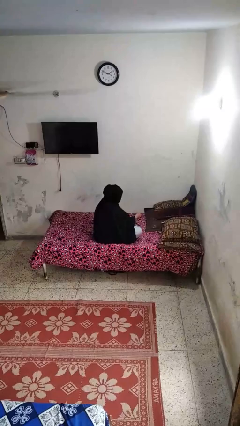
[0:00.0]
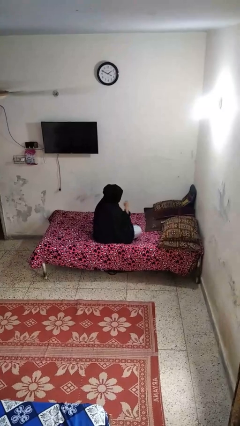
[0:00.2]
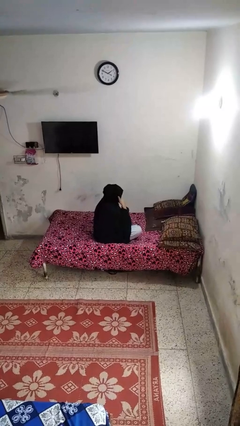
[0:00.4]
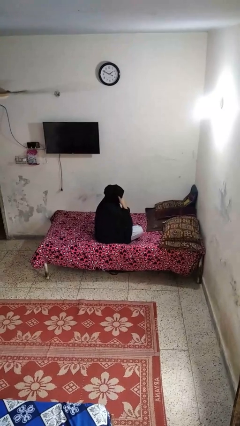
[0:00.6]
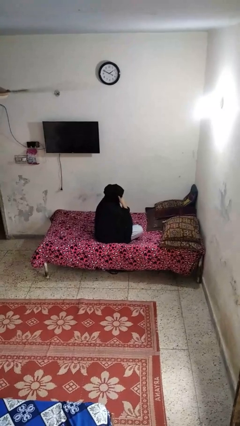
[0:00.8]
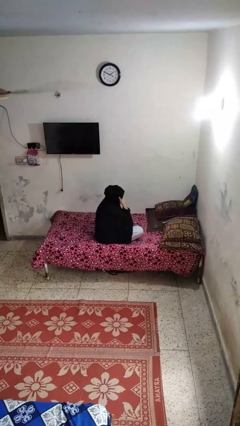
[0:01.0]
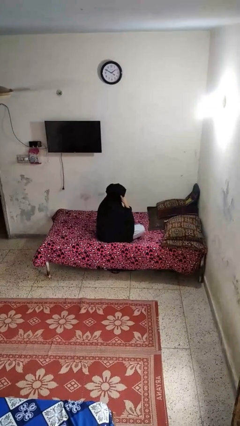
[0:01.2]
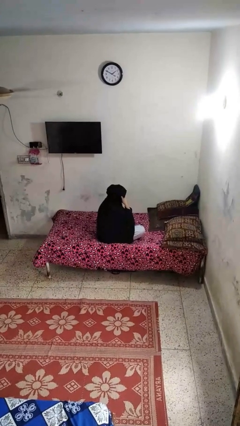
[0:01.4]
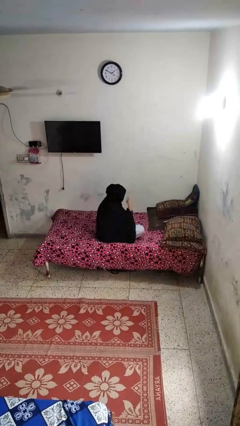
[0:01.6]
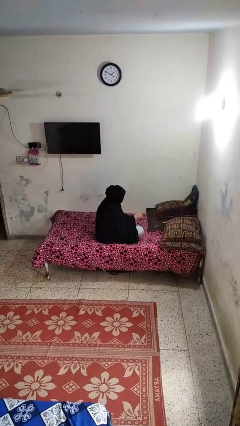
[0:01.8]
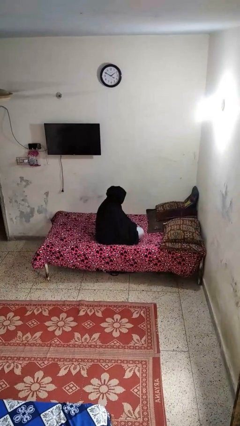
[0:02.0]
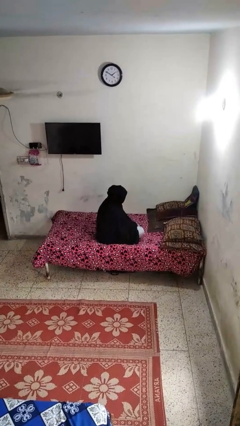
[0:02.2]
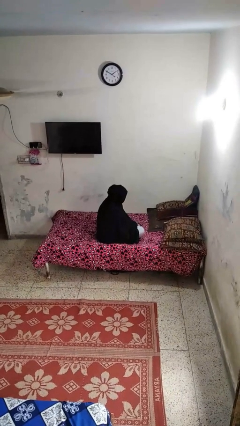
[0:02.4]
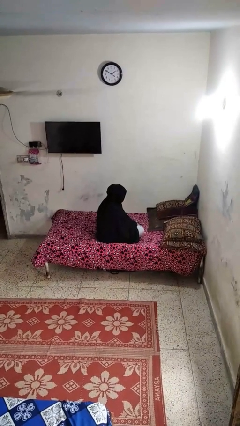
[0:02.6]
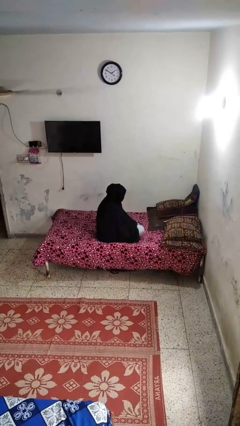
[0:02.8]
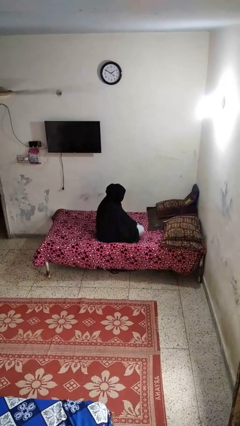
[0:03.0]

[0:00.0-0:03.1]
person gestures call me

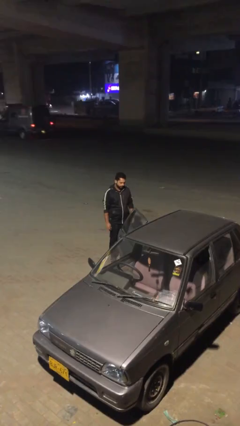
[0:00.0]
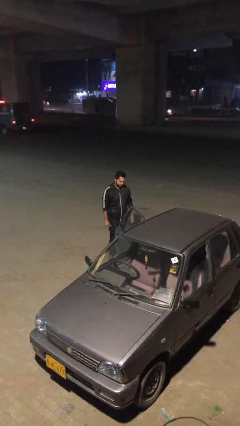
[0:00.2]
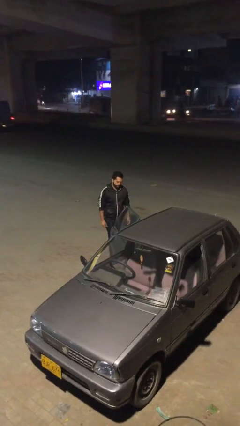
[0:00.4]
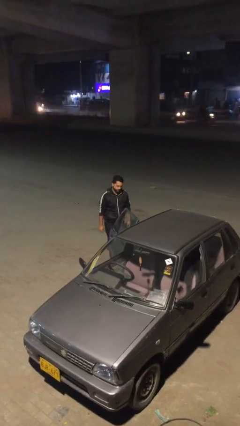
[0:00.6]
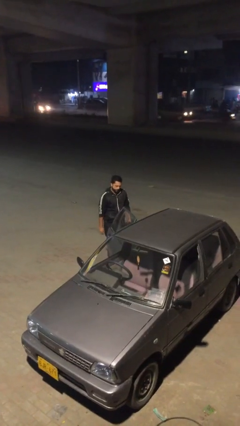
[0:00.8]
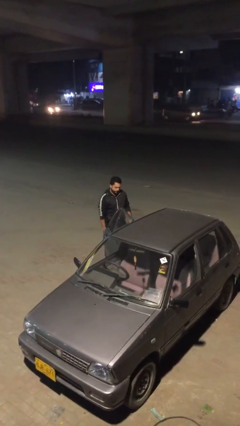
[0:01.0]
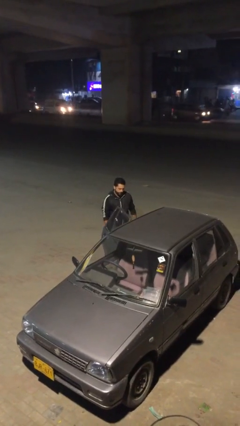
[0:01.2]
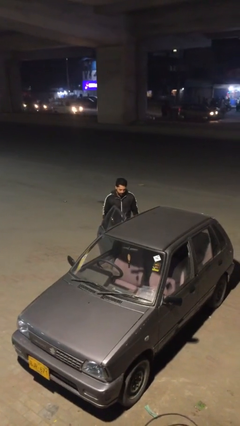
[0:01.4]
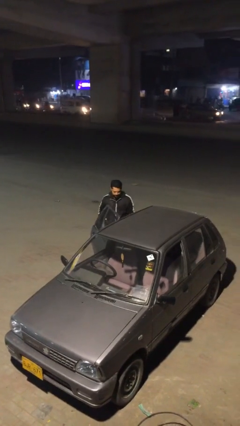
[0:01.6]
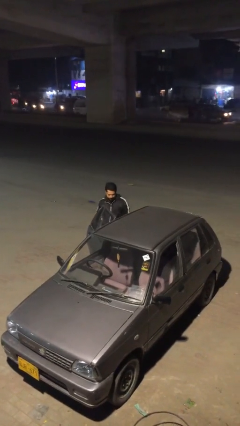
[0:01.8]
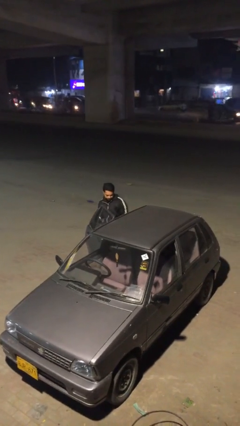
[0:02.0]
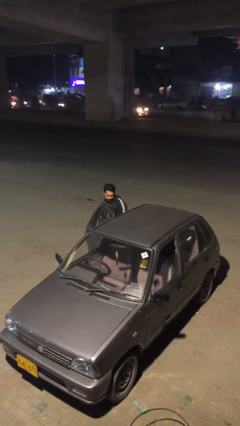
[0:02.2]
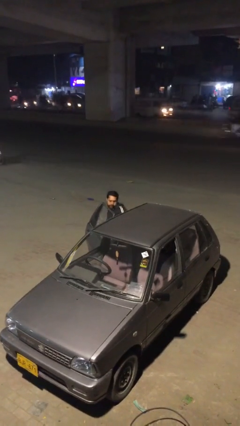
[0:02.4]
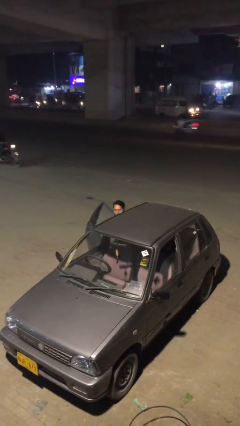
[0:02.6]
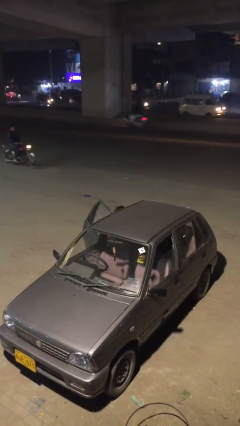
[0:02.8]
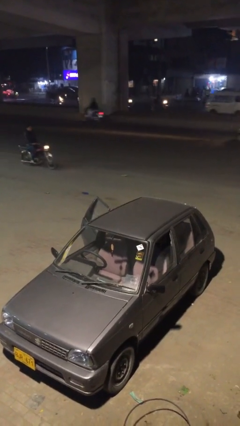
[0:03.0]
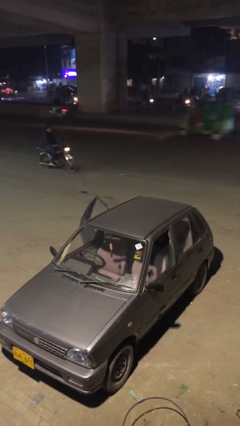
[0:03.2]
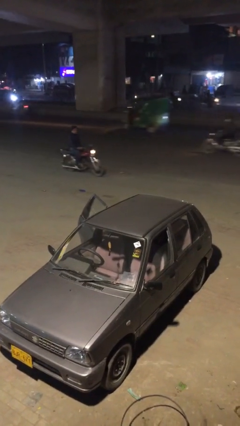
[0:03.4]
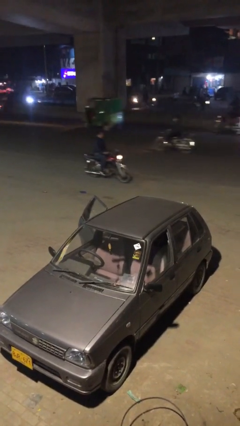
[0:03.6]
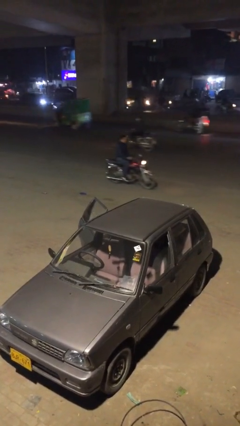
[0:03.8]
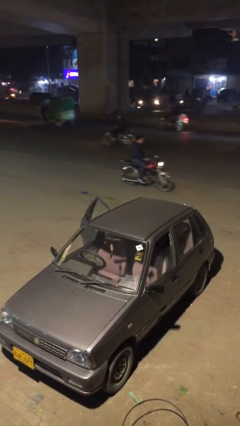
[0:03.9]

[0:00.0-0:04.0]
person enters car

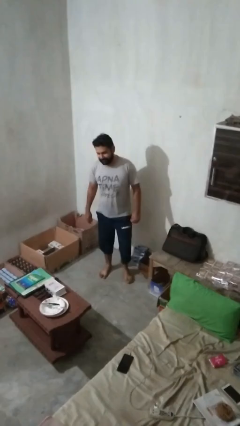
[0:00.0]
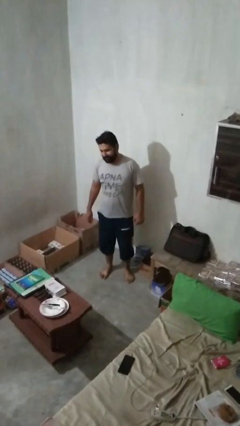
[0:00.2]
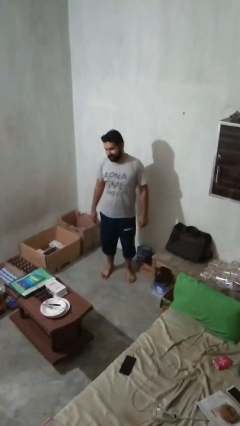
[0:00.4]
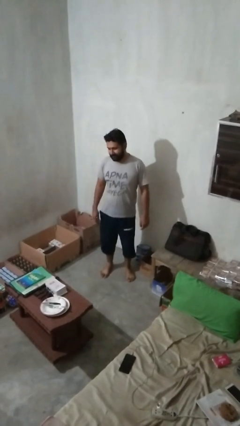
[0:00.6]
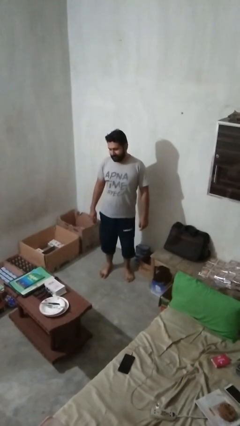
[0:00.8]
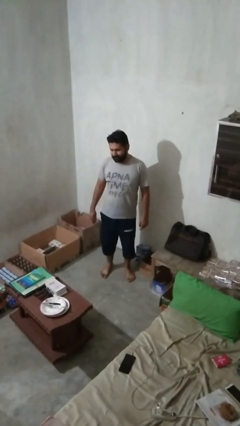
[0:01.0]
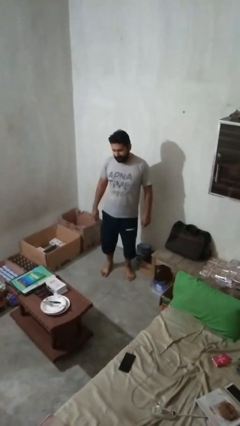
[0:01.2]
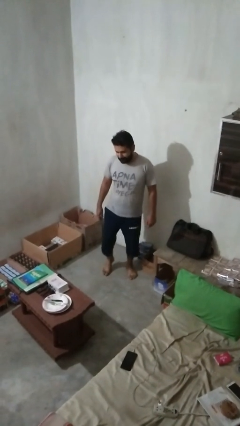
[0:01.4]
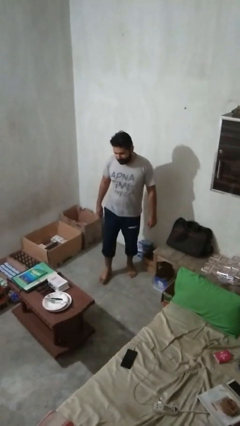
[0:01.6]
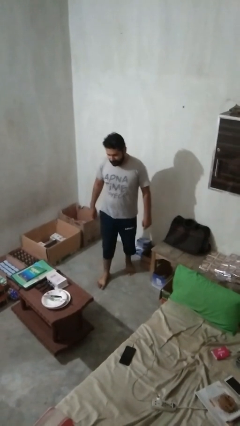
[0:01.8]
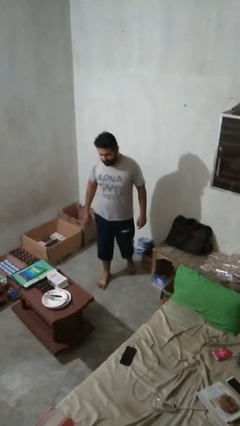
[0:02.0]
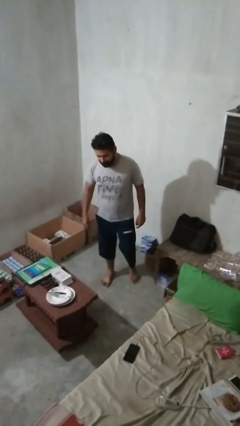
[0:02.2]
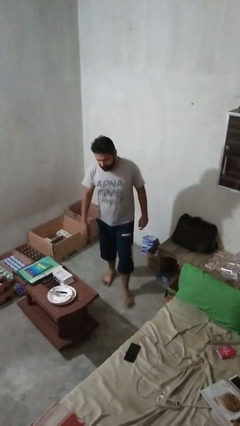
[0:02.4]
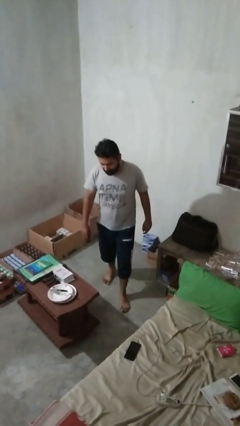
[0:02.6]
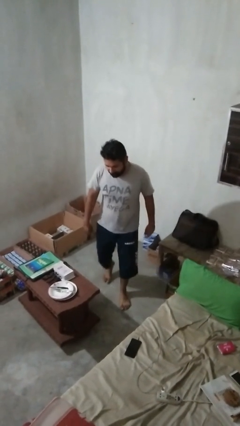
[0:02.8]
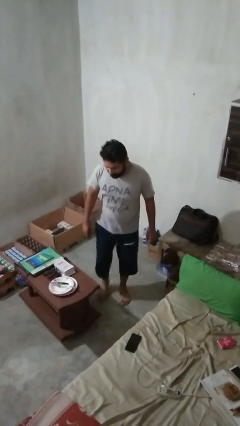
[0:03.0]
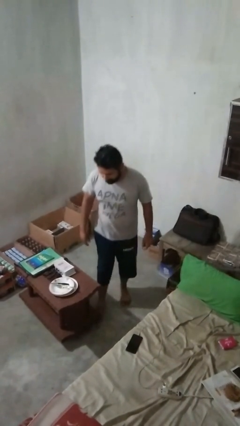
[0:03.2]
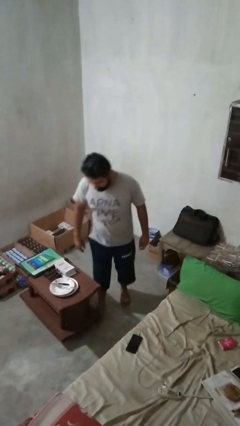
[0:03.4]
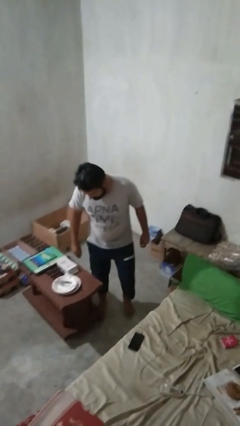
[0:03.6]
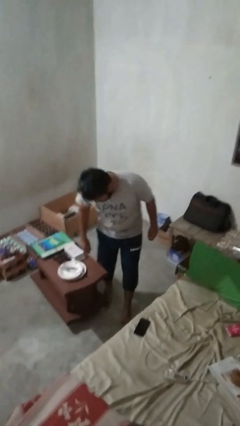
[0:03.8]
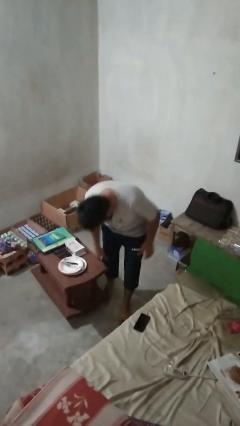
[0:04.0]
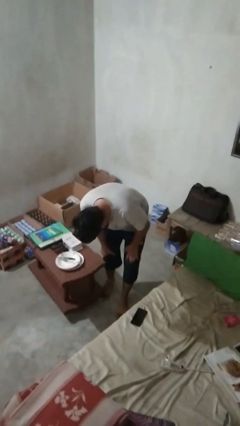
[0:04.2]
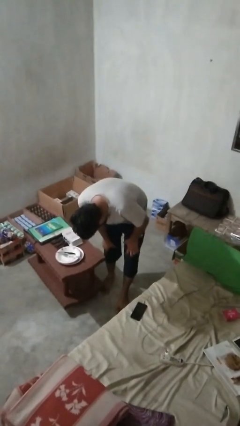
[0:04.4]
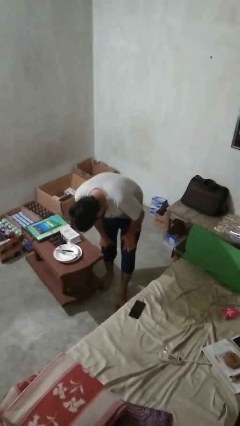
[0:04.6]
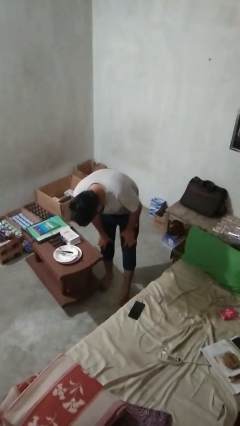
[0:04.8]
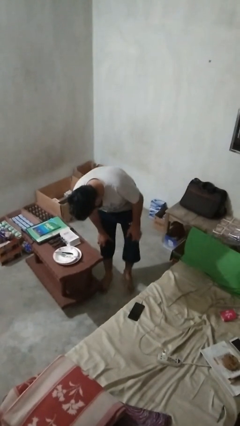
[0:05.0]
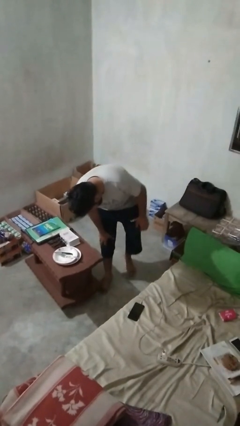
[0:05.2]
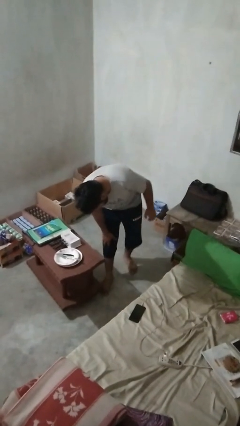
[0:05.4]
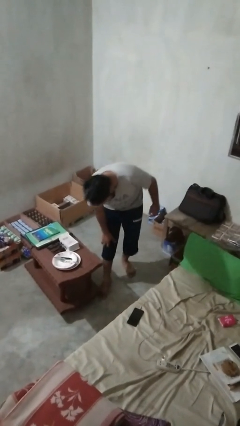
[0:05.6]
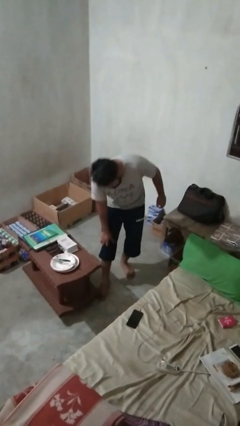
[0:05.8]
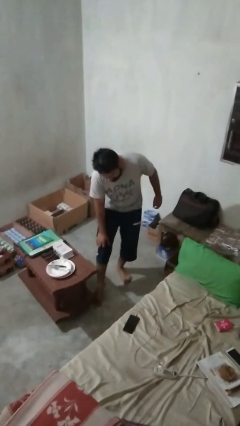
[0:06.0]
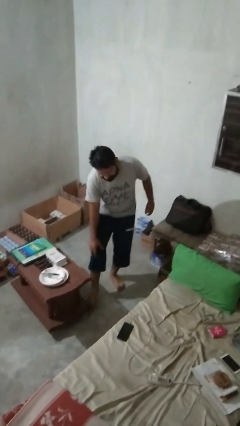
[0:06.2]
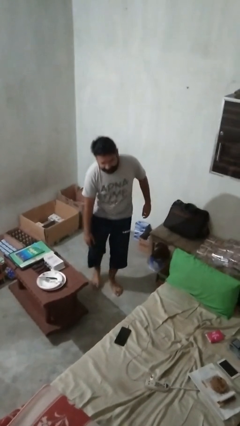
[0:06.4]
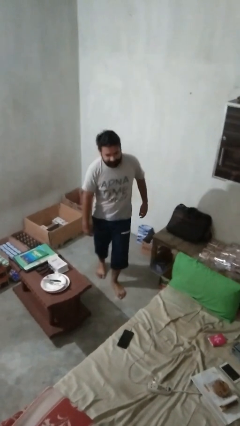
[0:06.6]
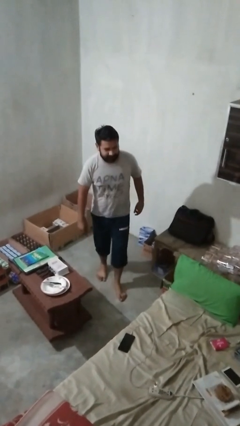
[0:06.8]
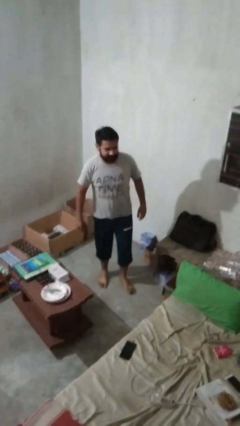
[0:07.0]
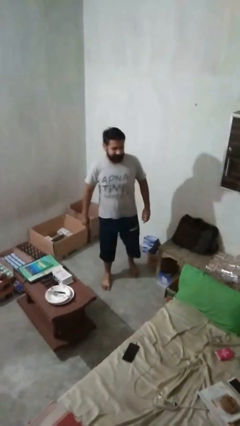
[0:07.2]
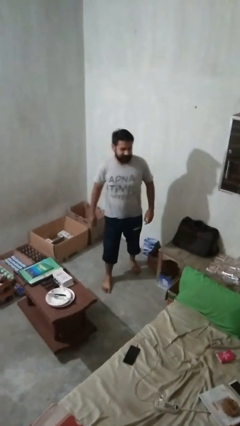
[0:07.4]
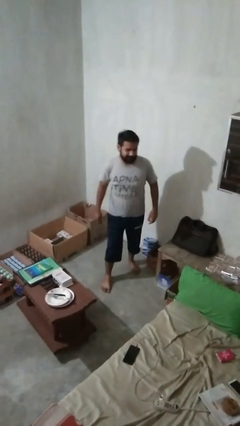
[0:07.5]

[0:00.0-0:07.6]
person bumps into table

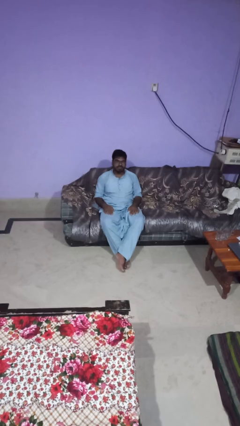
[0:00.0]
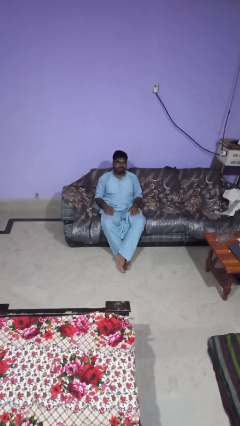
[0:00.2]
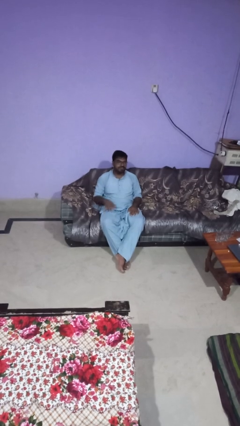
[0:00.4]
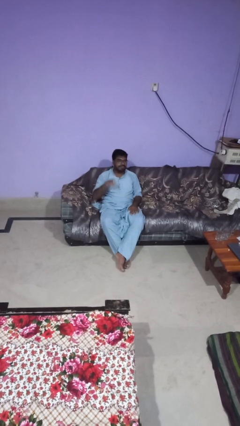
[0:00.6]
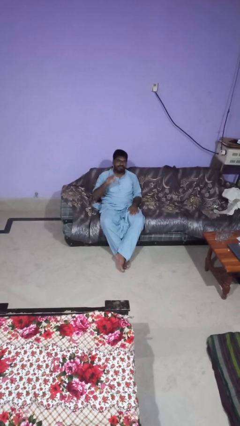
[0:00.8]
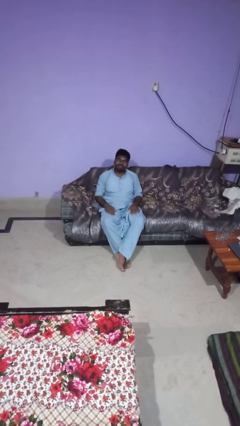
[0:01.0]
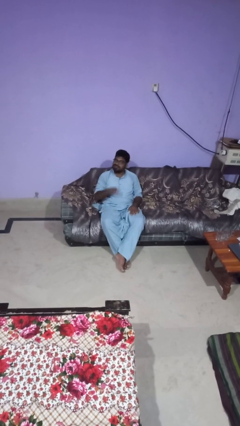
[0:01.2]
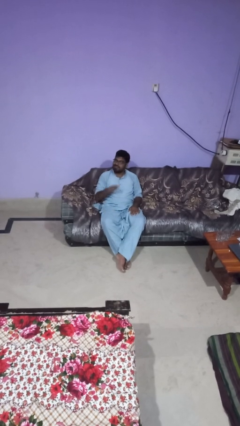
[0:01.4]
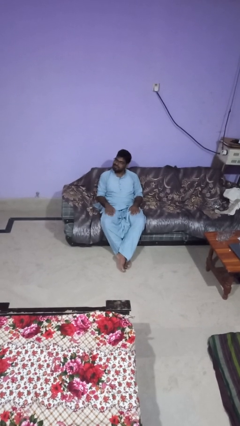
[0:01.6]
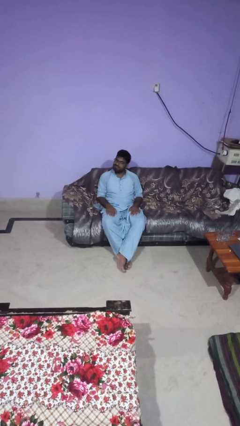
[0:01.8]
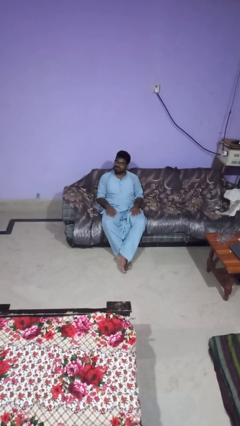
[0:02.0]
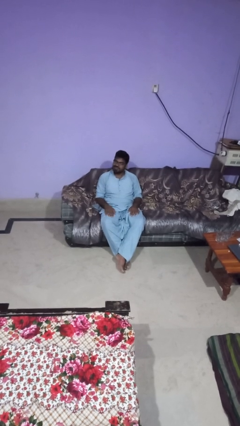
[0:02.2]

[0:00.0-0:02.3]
person slaps hands on thighs

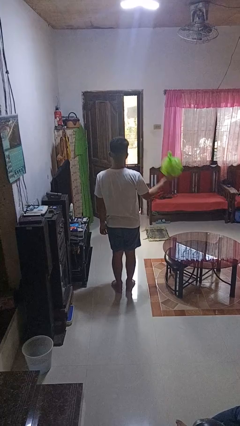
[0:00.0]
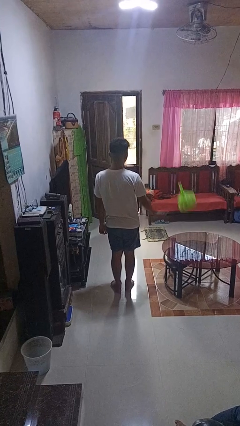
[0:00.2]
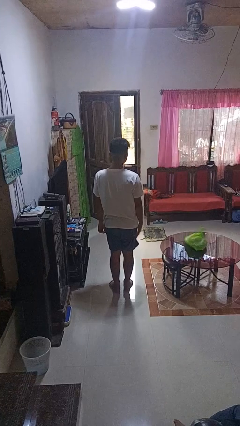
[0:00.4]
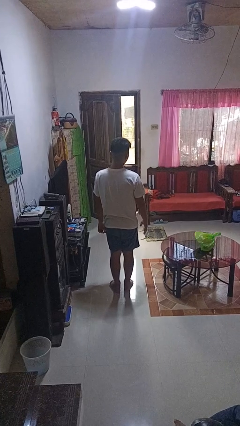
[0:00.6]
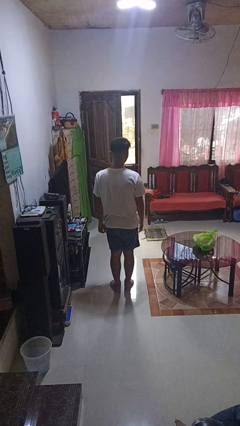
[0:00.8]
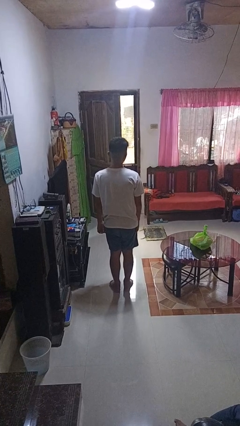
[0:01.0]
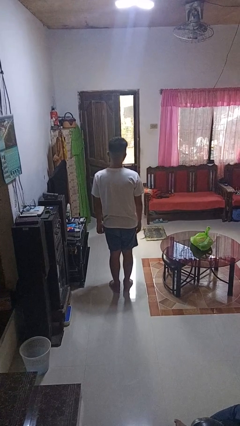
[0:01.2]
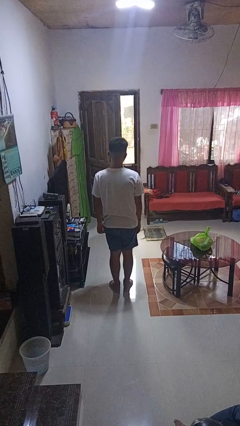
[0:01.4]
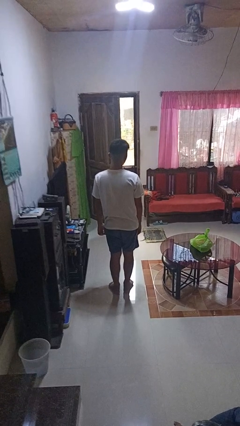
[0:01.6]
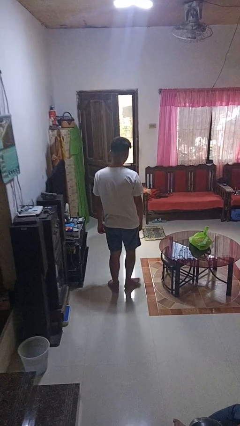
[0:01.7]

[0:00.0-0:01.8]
person throws object on table
